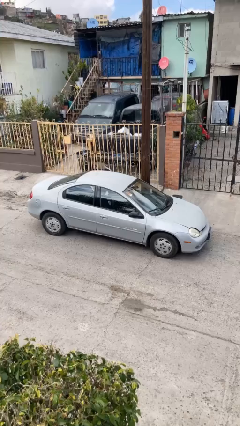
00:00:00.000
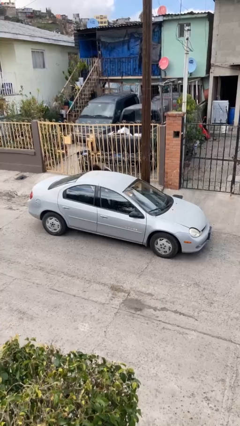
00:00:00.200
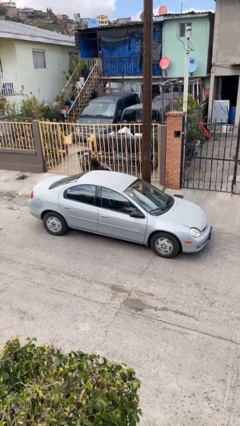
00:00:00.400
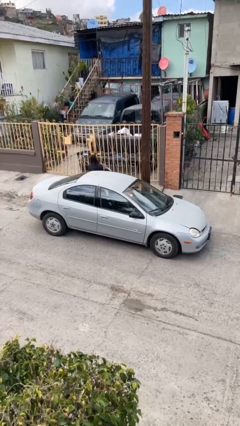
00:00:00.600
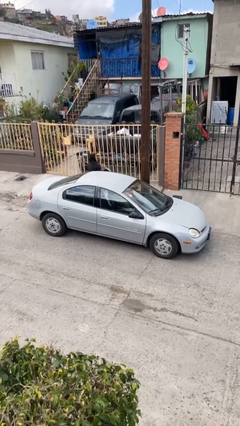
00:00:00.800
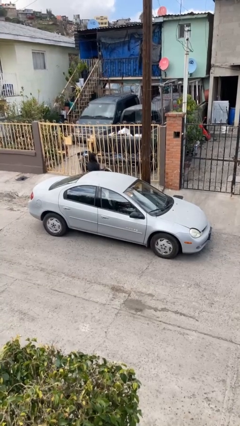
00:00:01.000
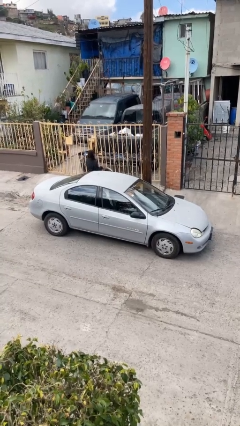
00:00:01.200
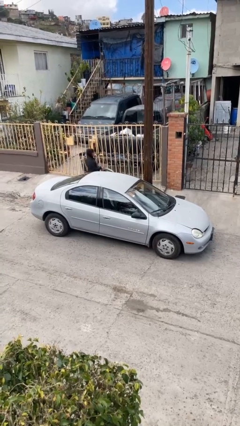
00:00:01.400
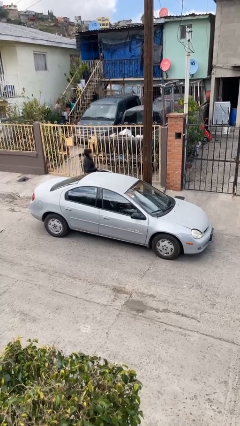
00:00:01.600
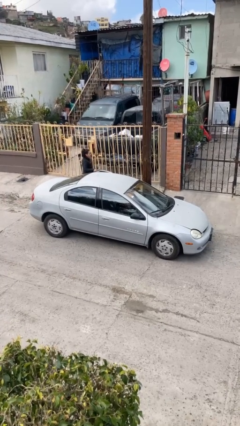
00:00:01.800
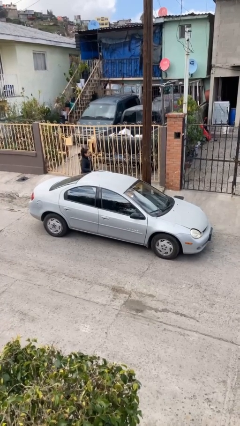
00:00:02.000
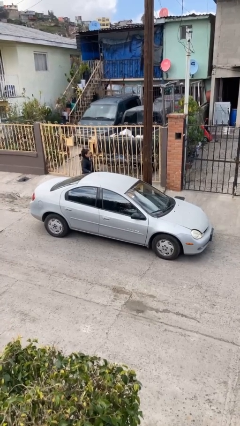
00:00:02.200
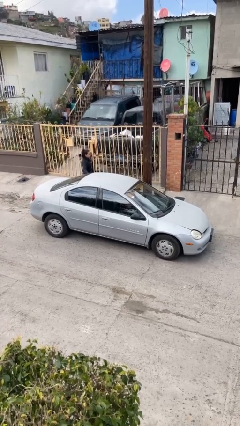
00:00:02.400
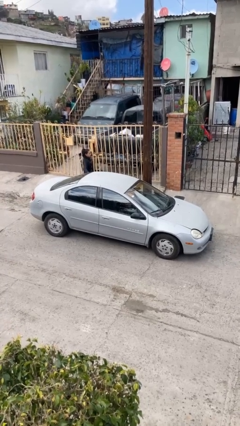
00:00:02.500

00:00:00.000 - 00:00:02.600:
car drops off person

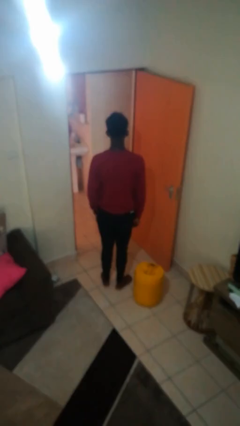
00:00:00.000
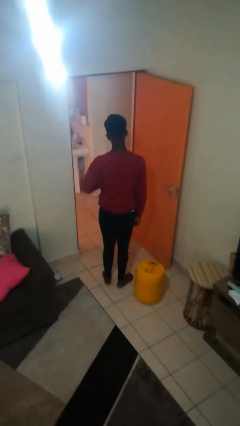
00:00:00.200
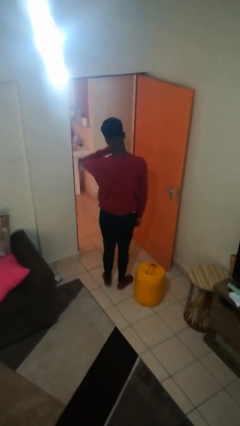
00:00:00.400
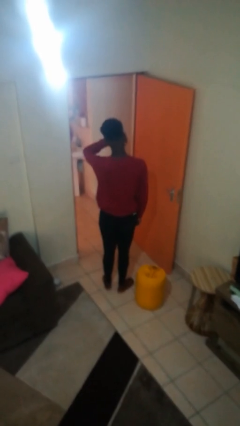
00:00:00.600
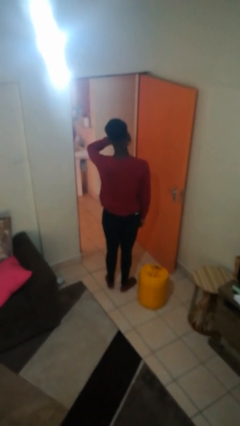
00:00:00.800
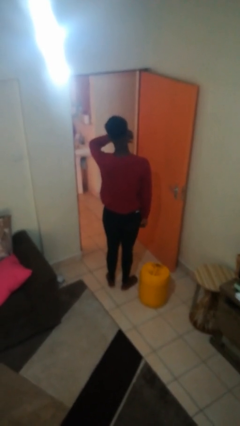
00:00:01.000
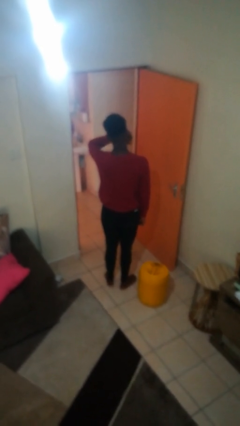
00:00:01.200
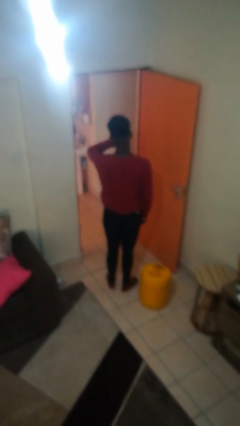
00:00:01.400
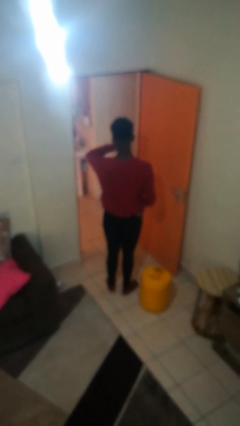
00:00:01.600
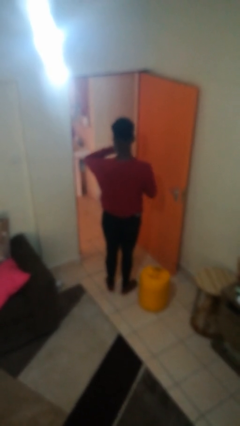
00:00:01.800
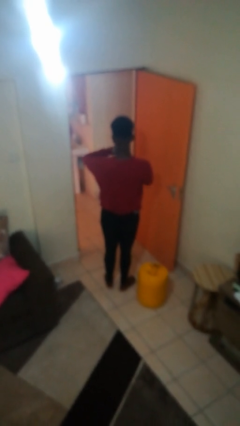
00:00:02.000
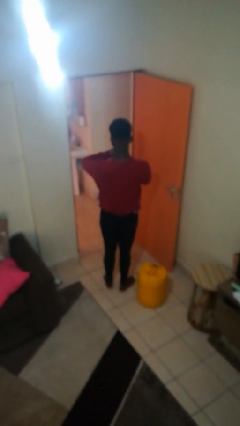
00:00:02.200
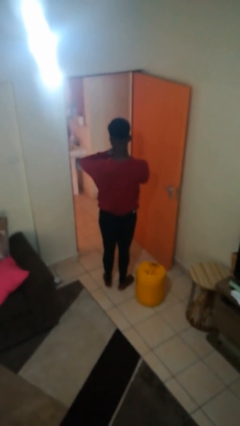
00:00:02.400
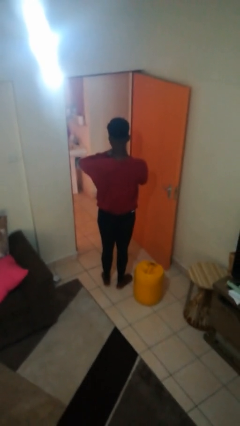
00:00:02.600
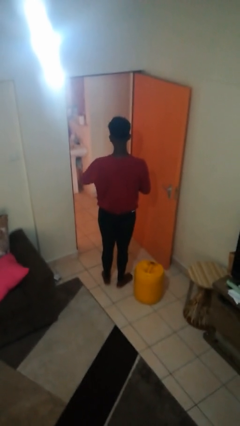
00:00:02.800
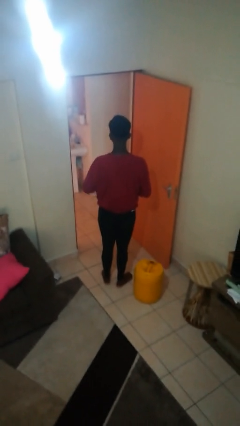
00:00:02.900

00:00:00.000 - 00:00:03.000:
person looks at wristwatch

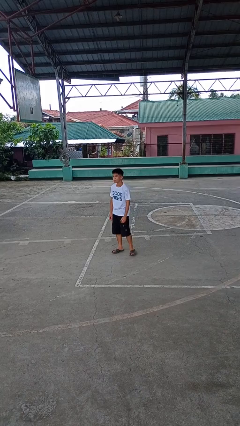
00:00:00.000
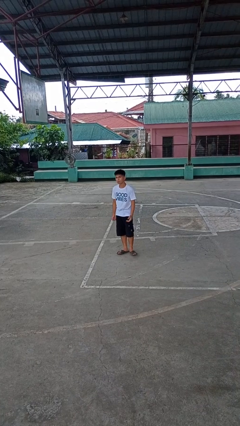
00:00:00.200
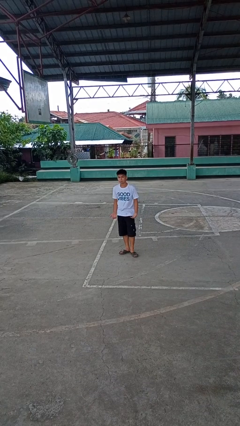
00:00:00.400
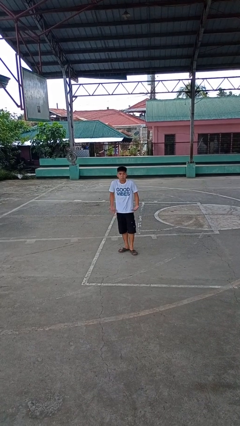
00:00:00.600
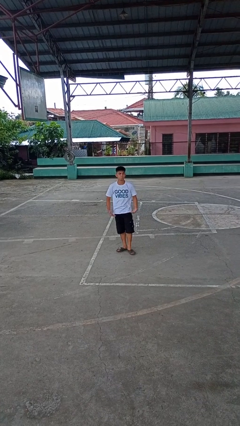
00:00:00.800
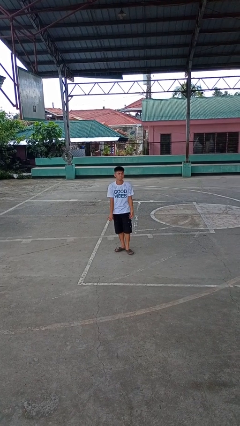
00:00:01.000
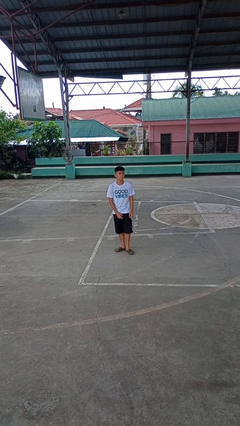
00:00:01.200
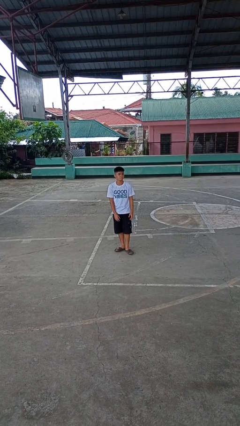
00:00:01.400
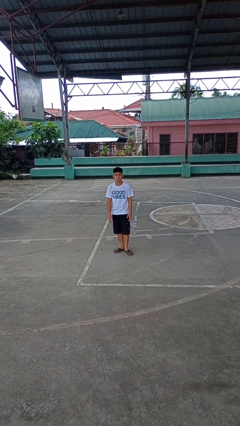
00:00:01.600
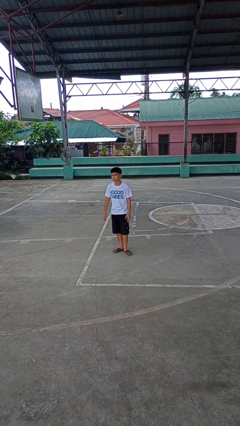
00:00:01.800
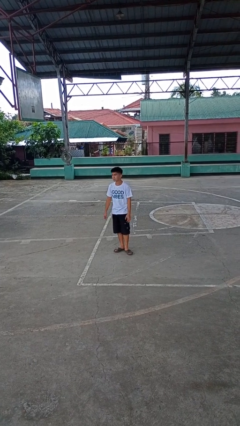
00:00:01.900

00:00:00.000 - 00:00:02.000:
person shrugs

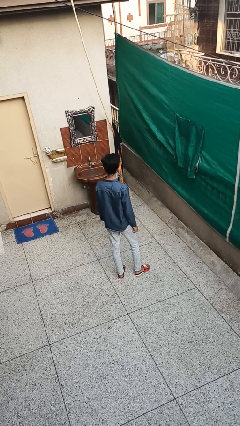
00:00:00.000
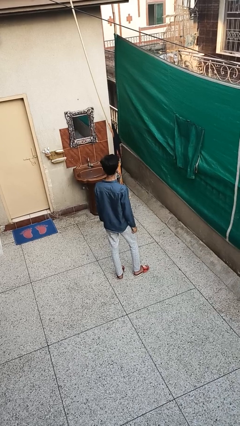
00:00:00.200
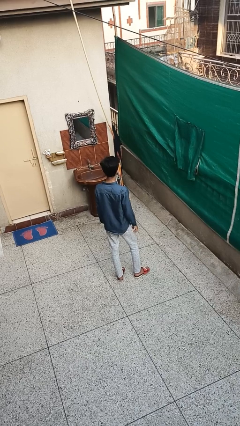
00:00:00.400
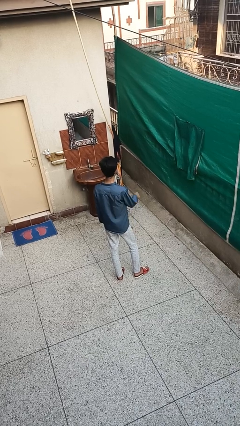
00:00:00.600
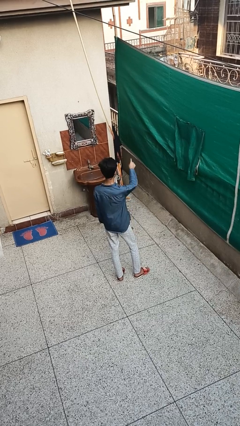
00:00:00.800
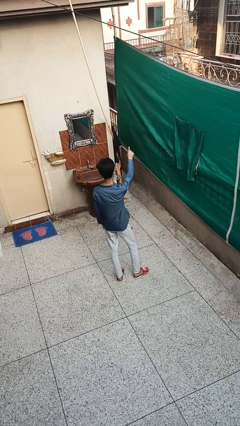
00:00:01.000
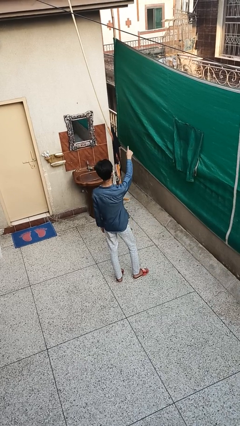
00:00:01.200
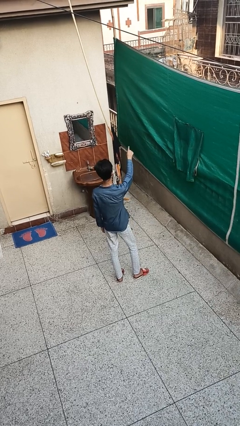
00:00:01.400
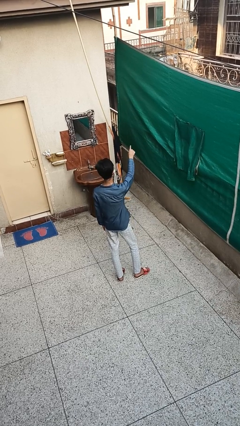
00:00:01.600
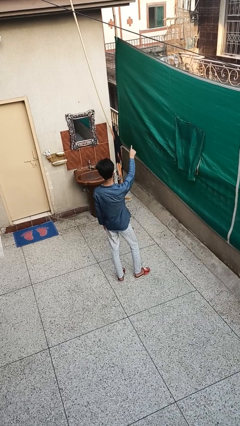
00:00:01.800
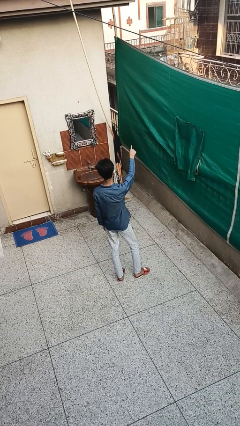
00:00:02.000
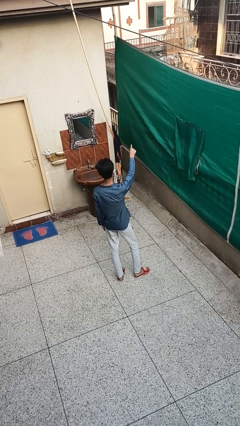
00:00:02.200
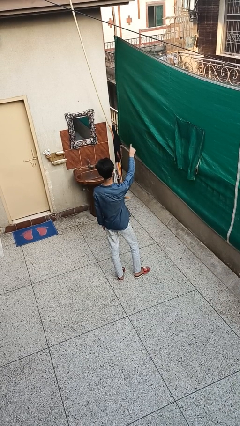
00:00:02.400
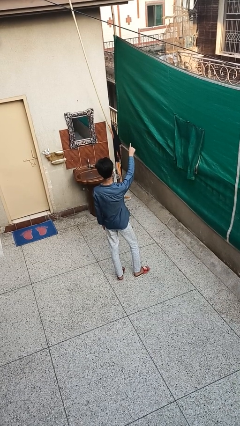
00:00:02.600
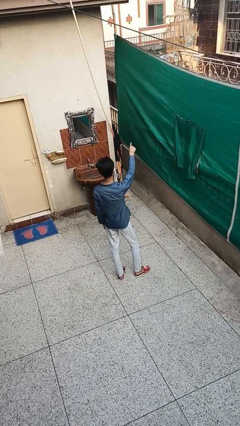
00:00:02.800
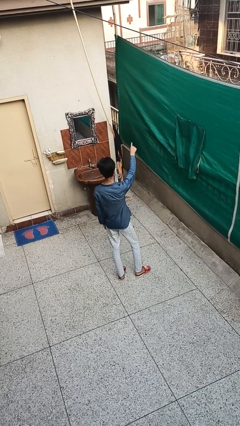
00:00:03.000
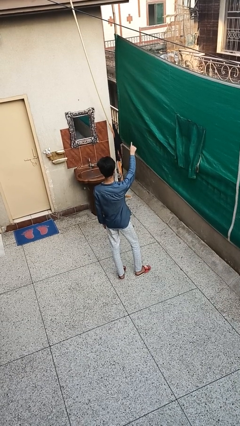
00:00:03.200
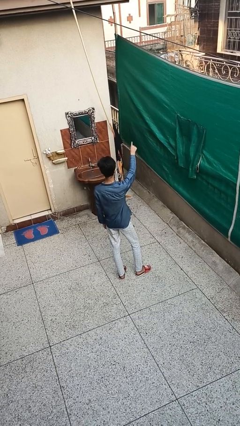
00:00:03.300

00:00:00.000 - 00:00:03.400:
person points at person

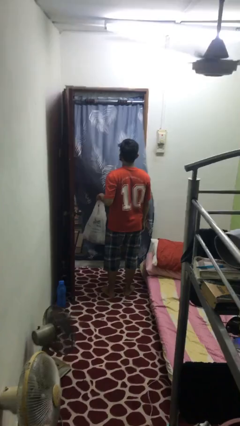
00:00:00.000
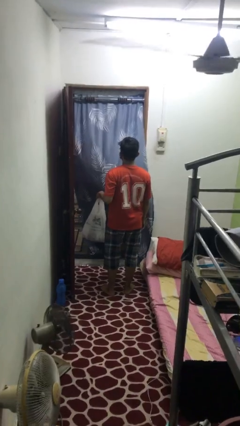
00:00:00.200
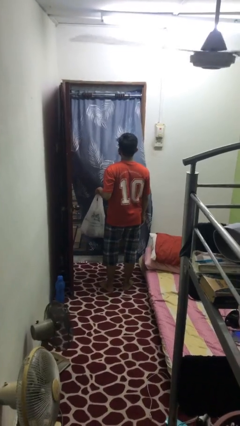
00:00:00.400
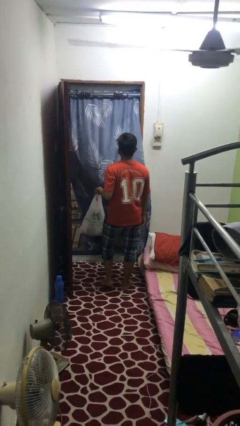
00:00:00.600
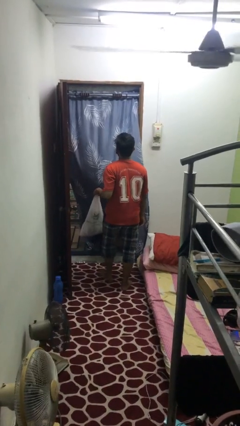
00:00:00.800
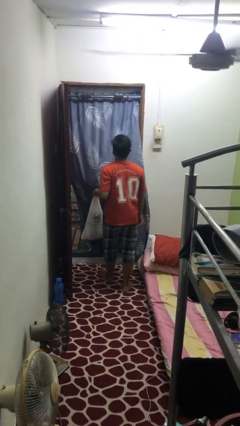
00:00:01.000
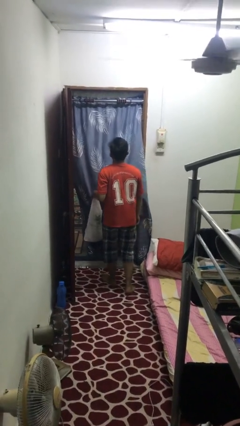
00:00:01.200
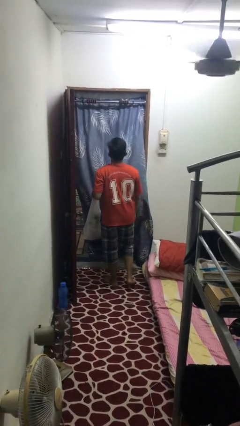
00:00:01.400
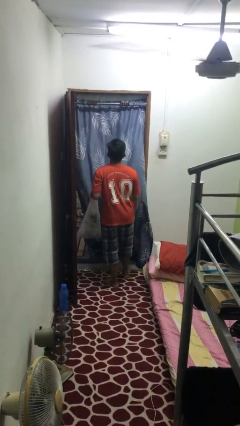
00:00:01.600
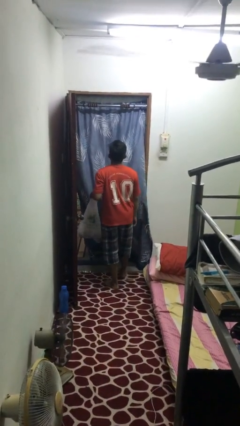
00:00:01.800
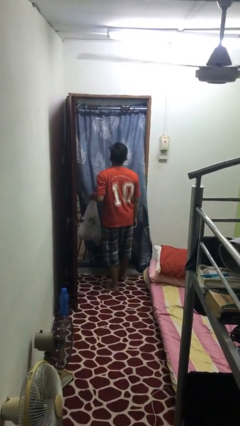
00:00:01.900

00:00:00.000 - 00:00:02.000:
person carries groceries

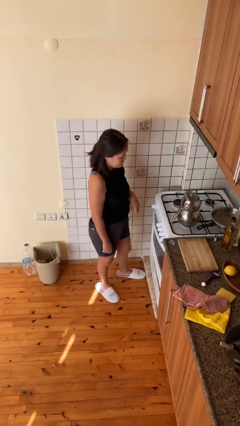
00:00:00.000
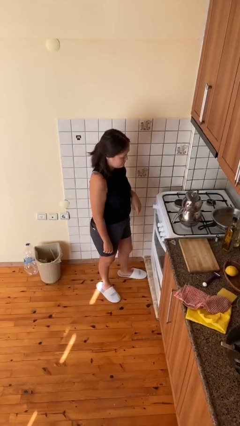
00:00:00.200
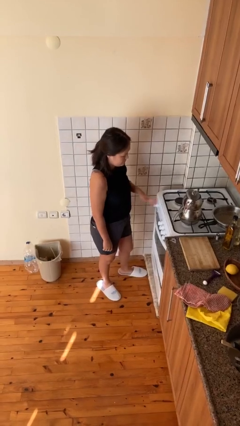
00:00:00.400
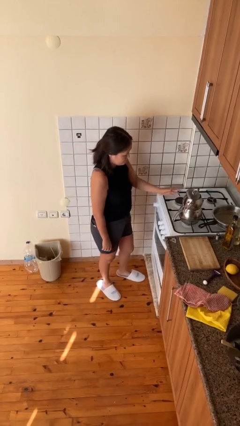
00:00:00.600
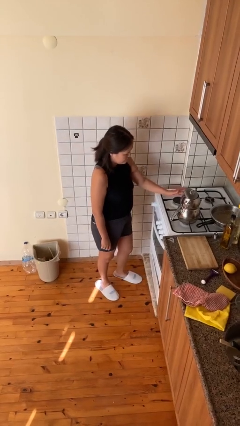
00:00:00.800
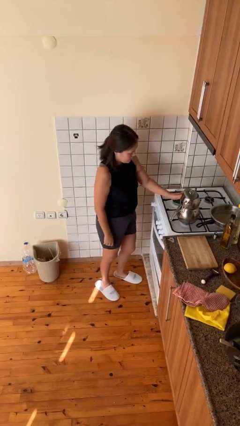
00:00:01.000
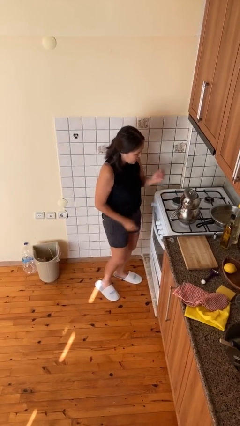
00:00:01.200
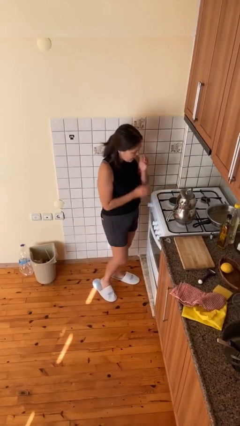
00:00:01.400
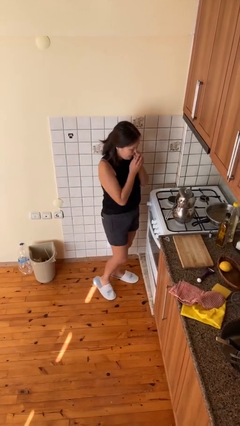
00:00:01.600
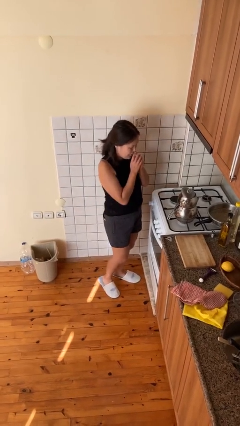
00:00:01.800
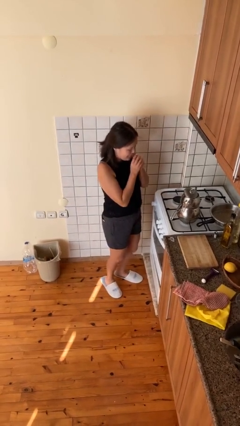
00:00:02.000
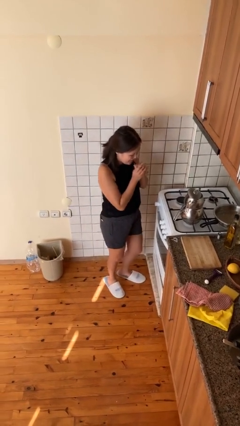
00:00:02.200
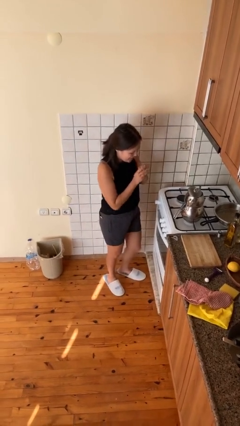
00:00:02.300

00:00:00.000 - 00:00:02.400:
person burns hand

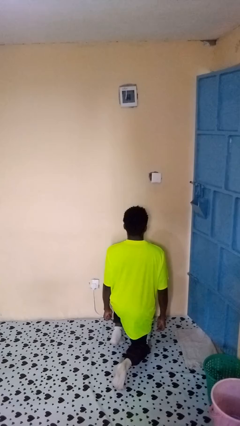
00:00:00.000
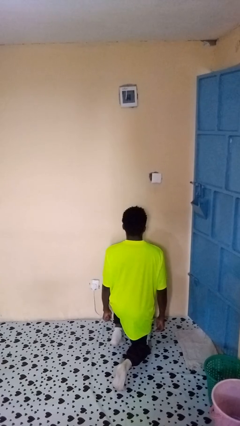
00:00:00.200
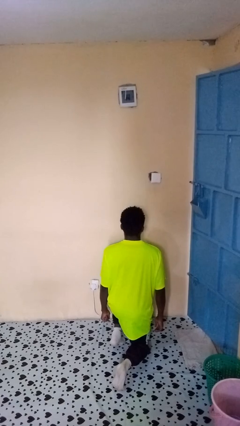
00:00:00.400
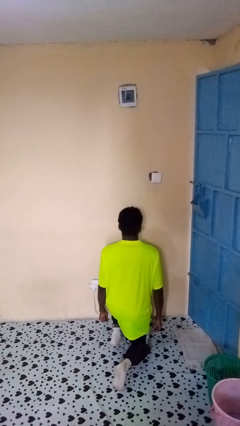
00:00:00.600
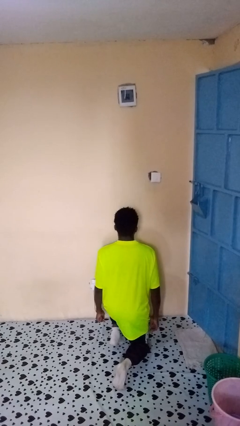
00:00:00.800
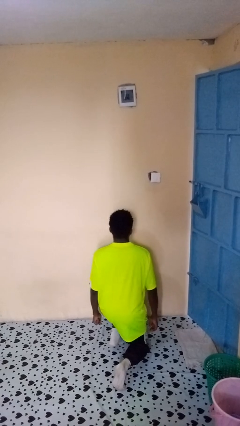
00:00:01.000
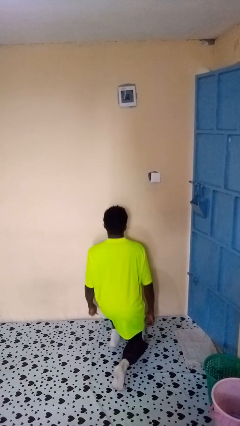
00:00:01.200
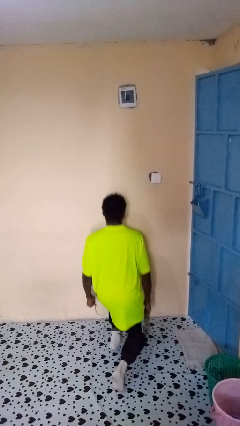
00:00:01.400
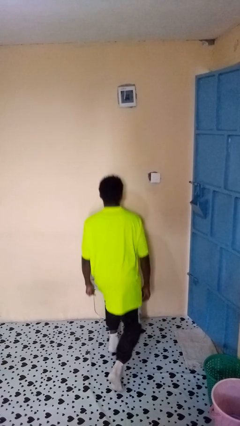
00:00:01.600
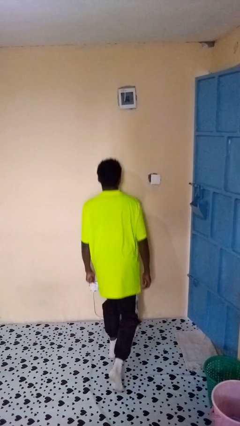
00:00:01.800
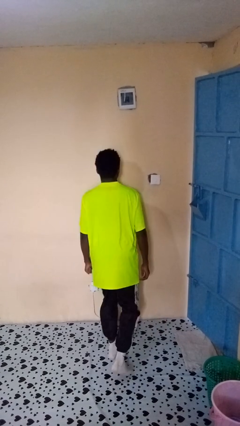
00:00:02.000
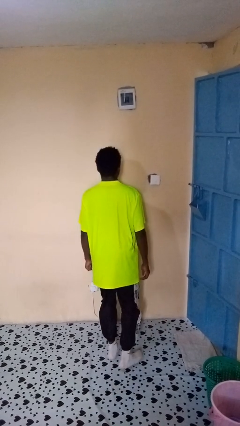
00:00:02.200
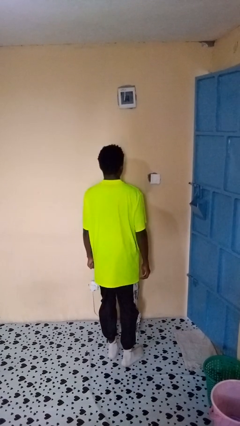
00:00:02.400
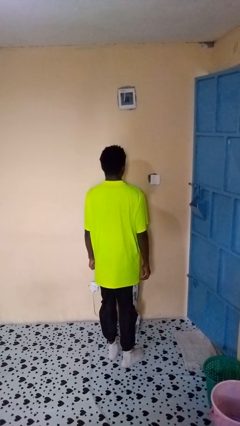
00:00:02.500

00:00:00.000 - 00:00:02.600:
person stands up from floor
